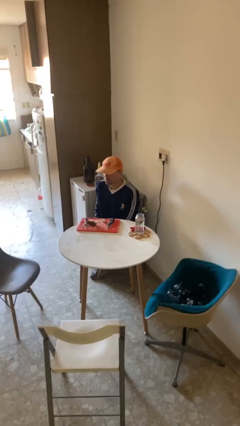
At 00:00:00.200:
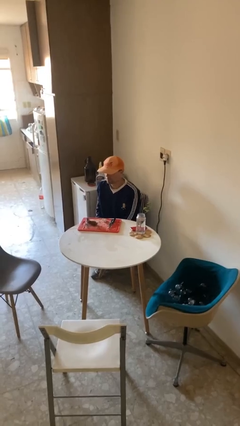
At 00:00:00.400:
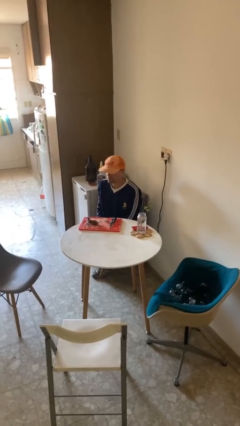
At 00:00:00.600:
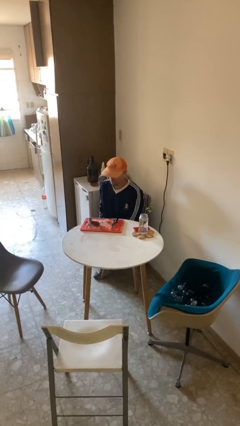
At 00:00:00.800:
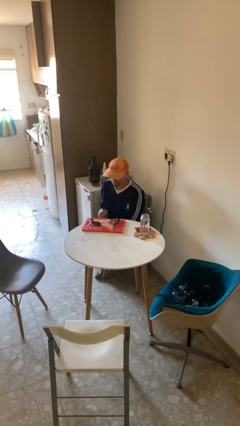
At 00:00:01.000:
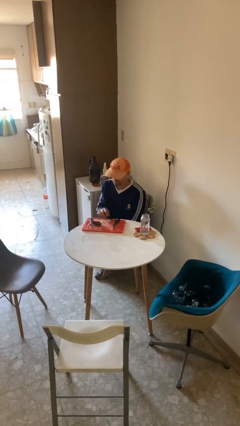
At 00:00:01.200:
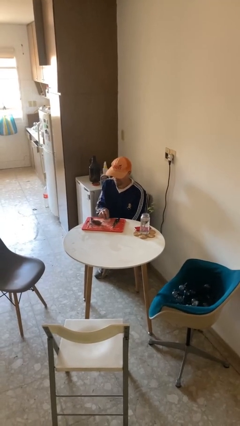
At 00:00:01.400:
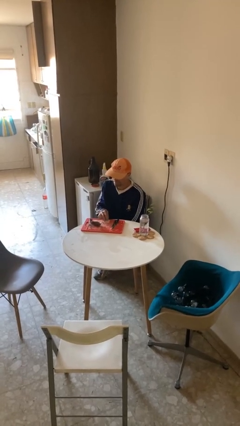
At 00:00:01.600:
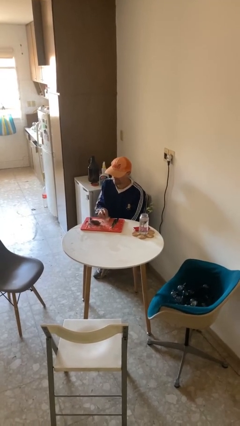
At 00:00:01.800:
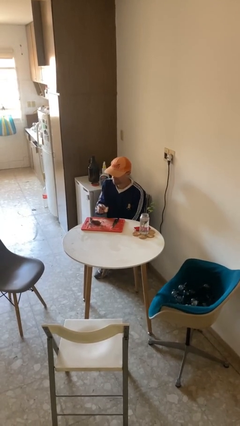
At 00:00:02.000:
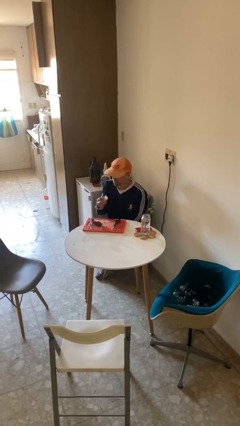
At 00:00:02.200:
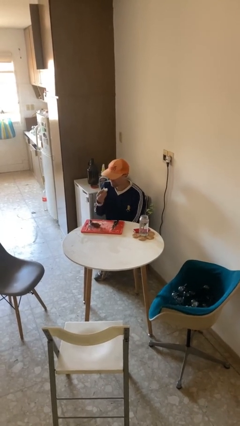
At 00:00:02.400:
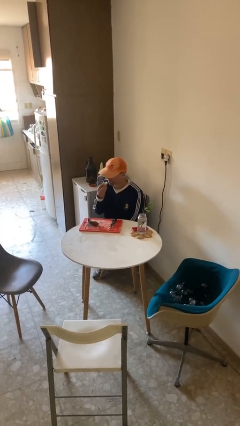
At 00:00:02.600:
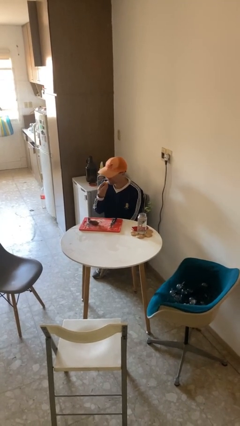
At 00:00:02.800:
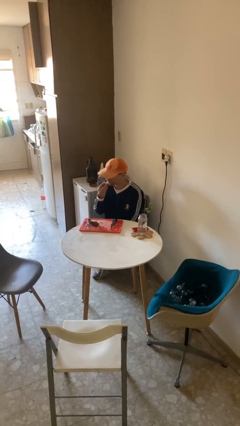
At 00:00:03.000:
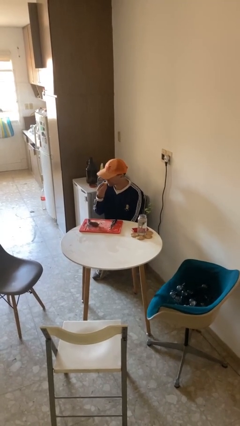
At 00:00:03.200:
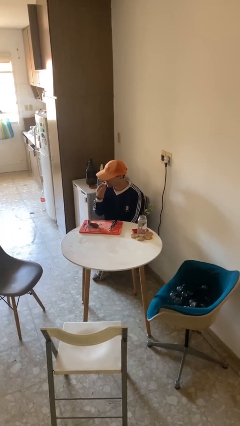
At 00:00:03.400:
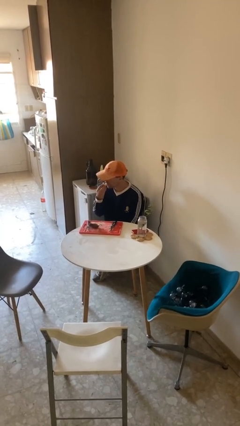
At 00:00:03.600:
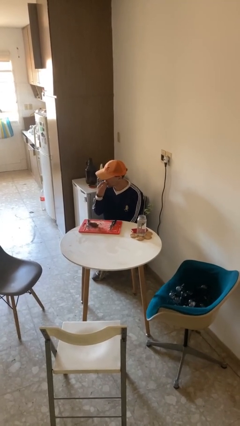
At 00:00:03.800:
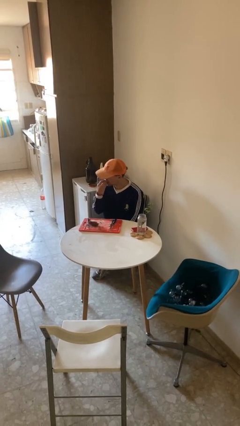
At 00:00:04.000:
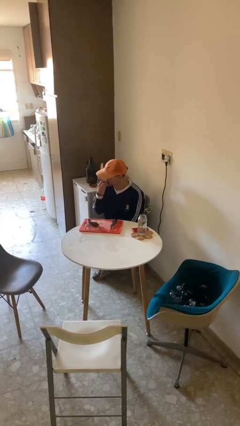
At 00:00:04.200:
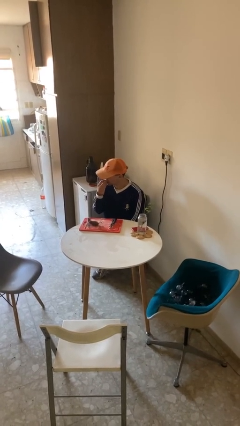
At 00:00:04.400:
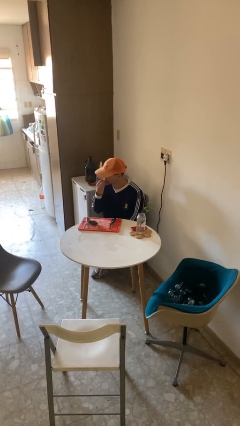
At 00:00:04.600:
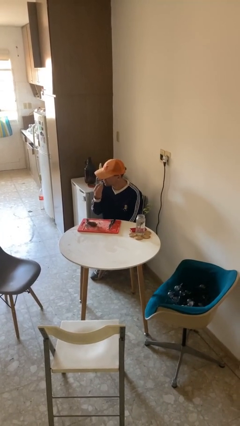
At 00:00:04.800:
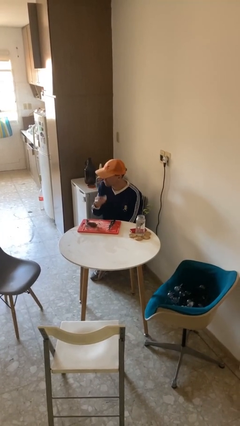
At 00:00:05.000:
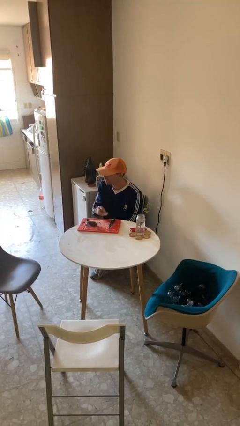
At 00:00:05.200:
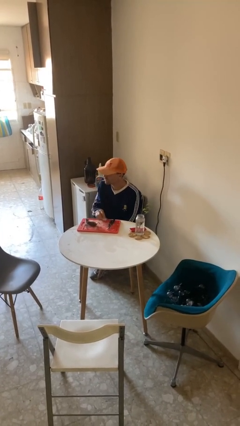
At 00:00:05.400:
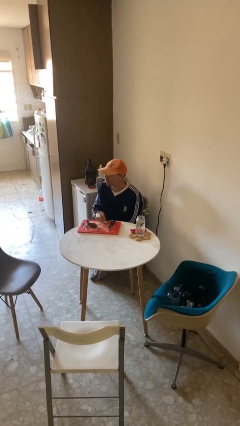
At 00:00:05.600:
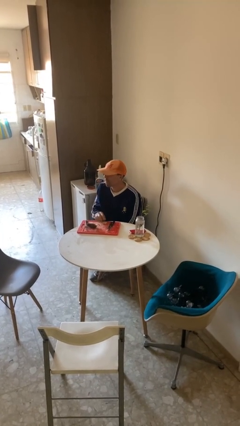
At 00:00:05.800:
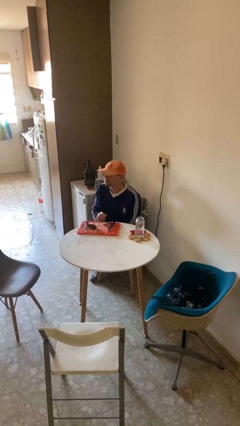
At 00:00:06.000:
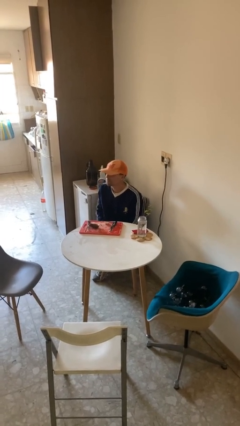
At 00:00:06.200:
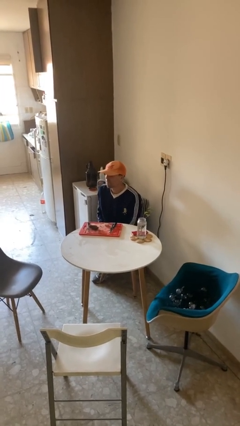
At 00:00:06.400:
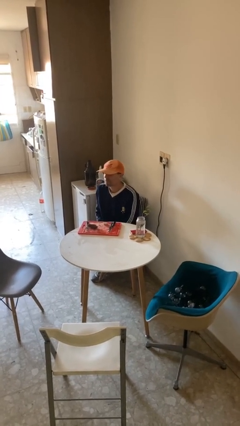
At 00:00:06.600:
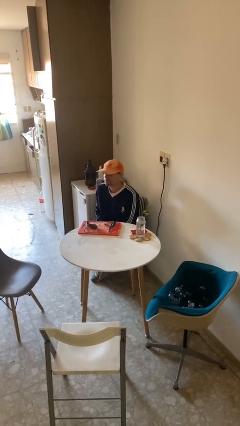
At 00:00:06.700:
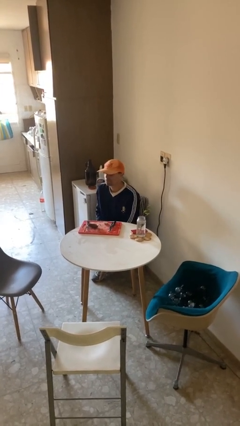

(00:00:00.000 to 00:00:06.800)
person eats with hands

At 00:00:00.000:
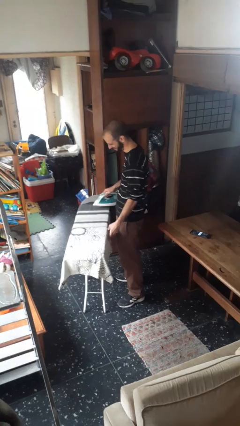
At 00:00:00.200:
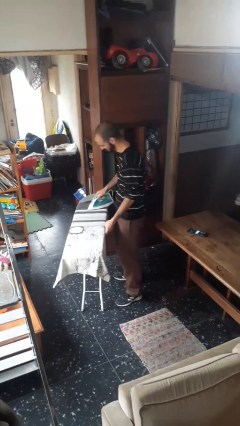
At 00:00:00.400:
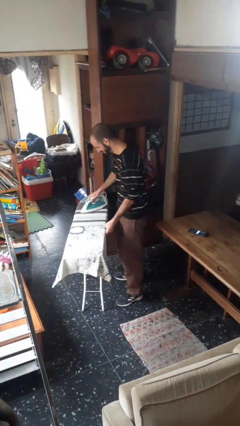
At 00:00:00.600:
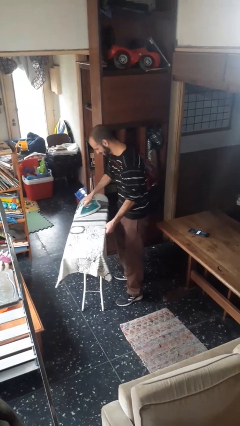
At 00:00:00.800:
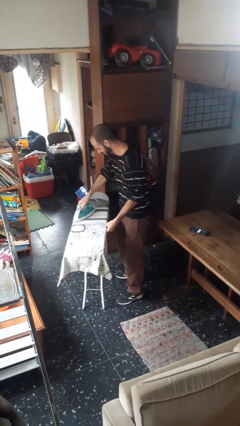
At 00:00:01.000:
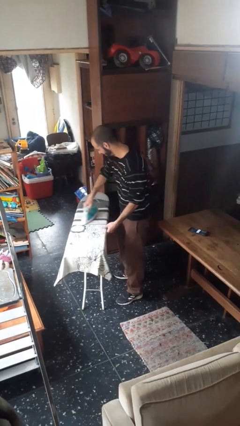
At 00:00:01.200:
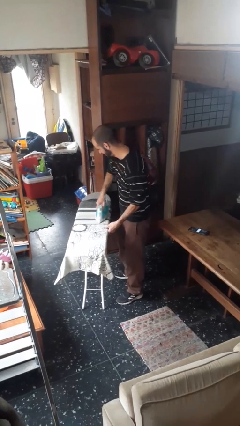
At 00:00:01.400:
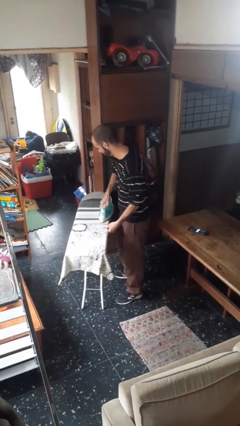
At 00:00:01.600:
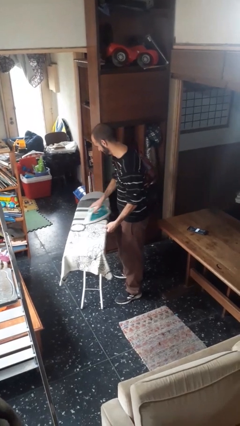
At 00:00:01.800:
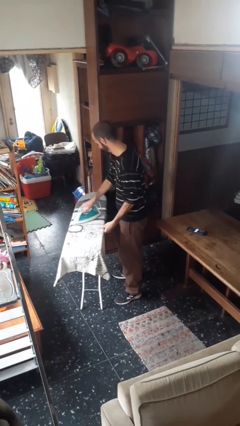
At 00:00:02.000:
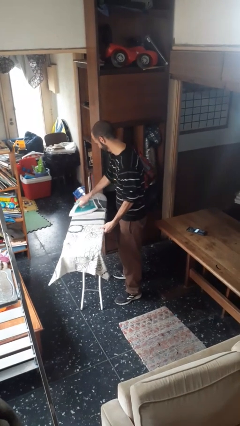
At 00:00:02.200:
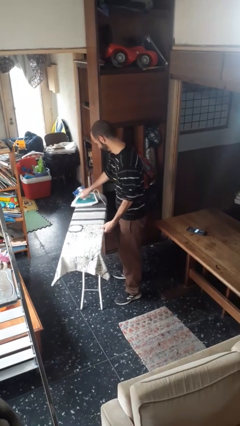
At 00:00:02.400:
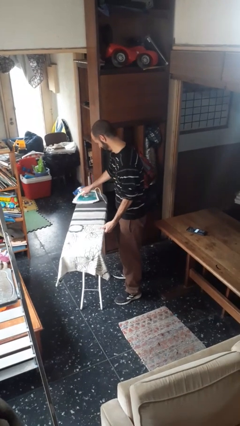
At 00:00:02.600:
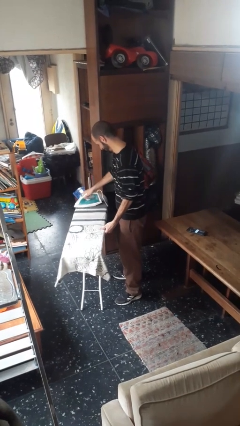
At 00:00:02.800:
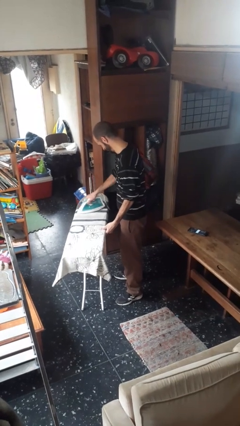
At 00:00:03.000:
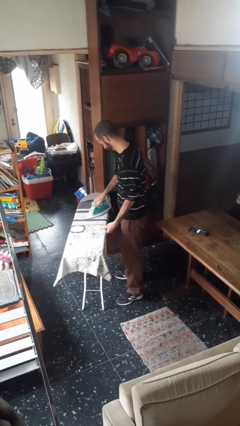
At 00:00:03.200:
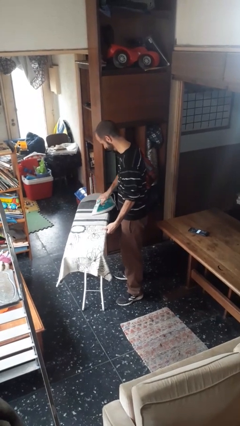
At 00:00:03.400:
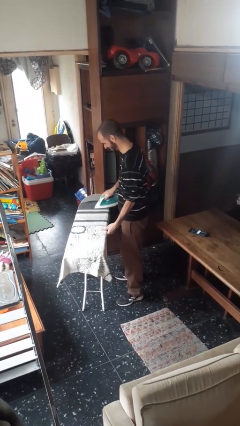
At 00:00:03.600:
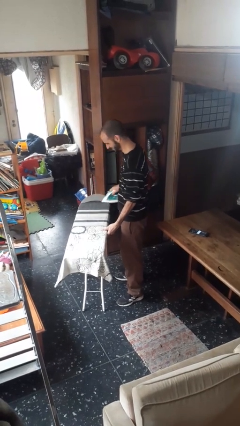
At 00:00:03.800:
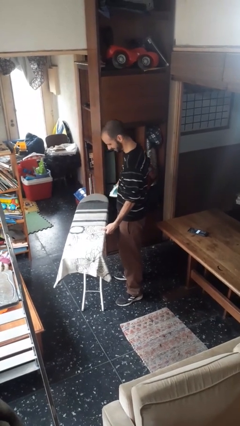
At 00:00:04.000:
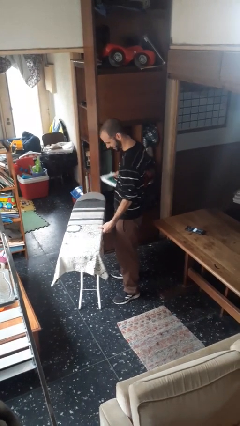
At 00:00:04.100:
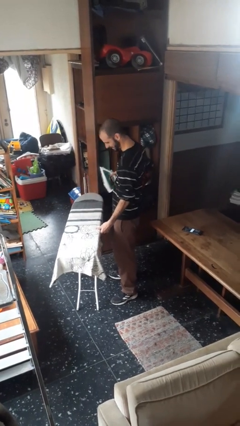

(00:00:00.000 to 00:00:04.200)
person irons clothes

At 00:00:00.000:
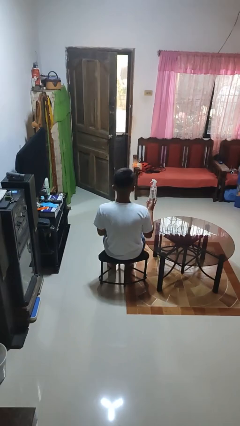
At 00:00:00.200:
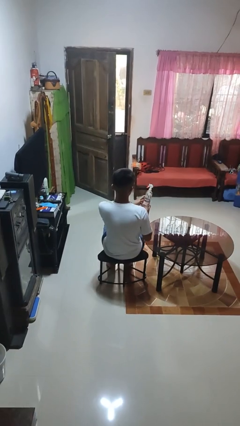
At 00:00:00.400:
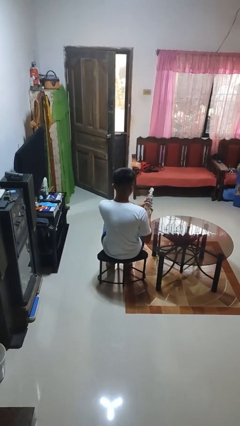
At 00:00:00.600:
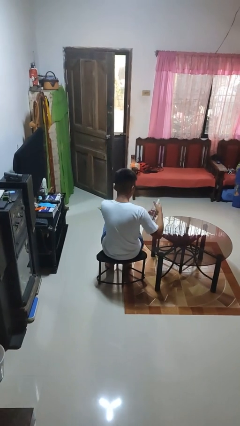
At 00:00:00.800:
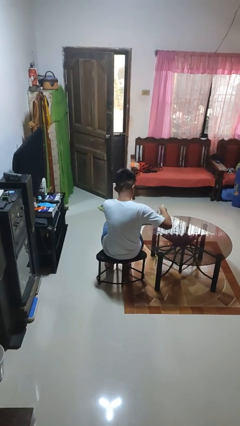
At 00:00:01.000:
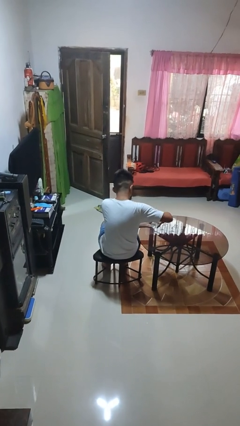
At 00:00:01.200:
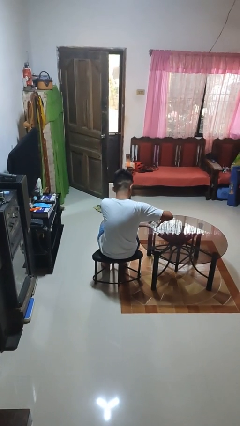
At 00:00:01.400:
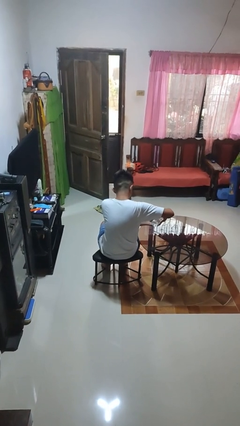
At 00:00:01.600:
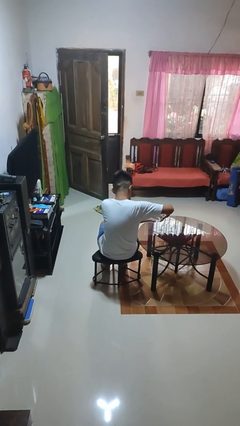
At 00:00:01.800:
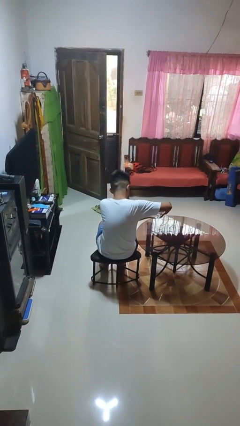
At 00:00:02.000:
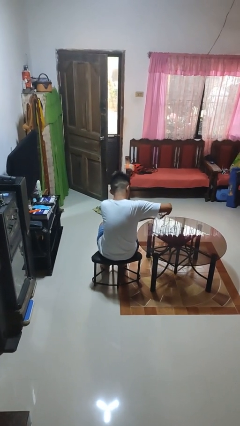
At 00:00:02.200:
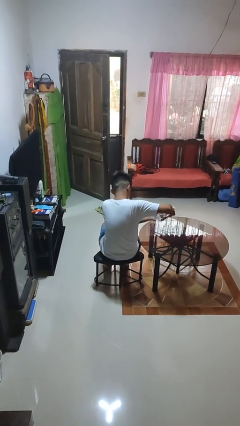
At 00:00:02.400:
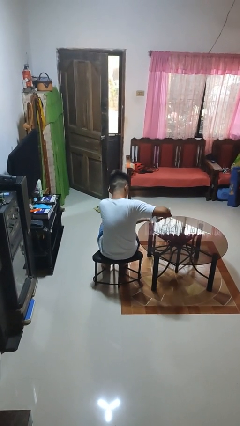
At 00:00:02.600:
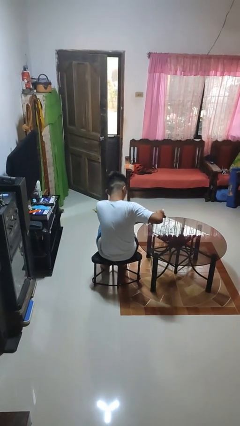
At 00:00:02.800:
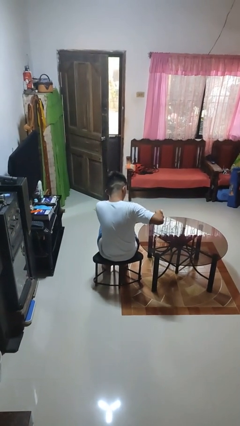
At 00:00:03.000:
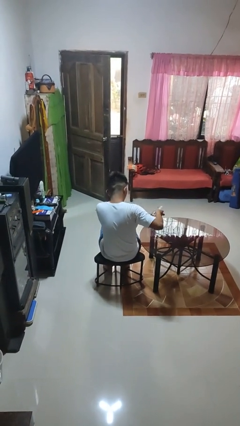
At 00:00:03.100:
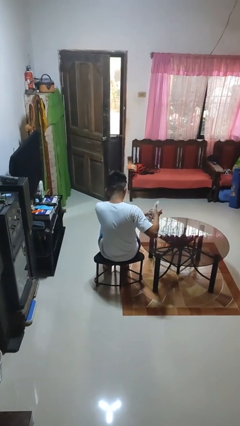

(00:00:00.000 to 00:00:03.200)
person sprays from bottle

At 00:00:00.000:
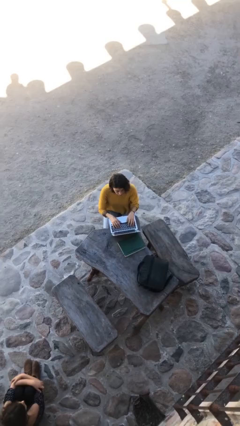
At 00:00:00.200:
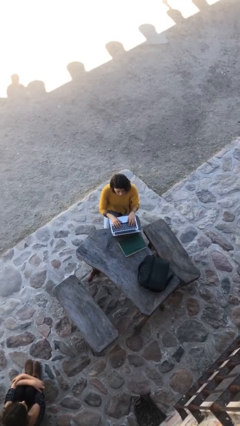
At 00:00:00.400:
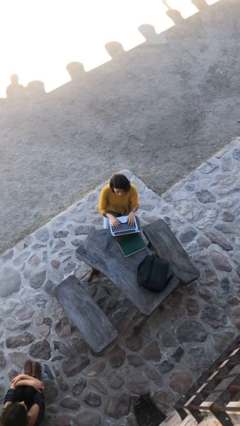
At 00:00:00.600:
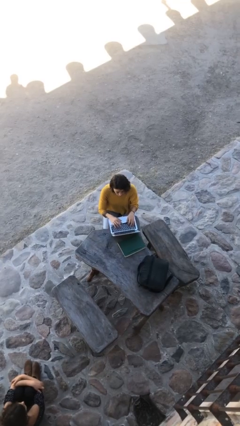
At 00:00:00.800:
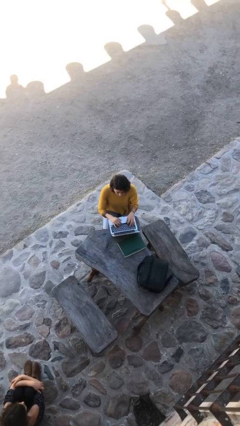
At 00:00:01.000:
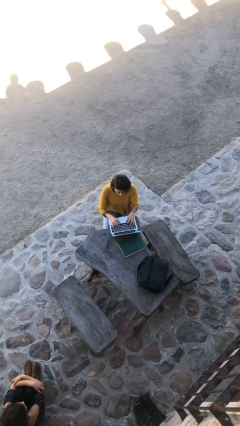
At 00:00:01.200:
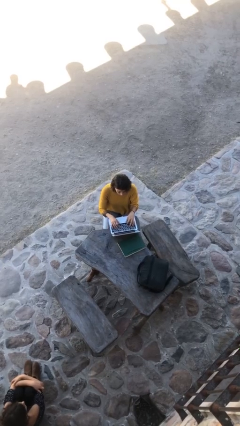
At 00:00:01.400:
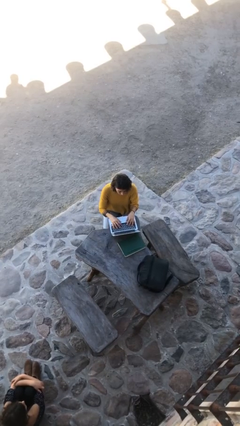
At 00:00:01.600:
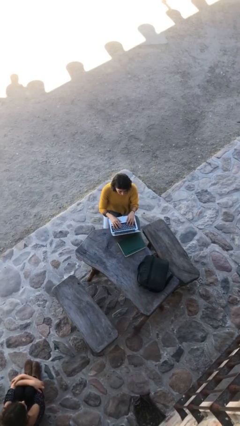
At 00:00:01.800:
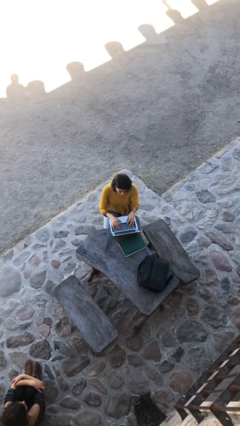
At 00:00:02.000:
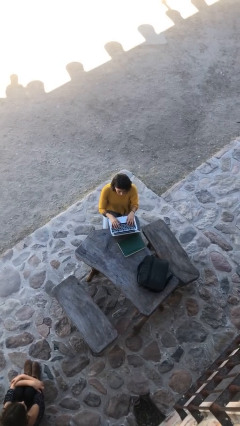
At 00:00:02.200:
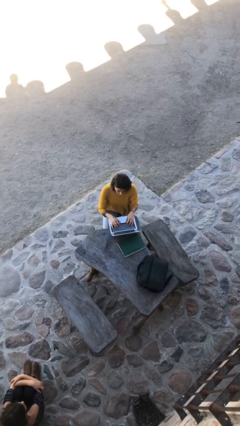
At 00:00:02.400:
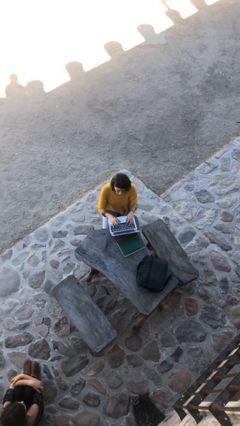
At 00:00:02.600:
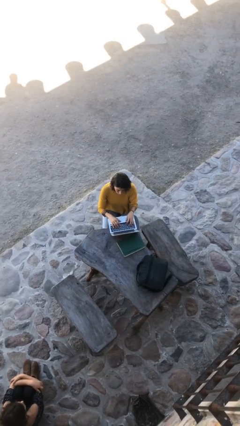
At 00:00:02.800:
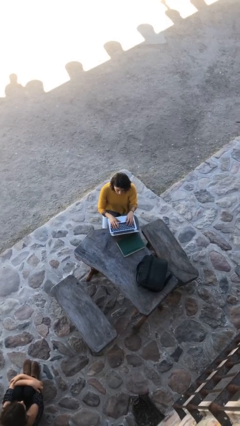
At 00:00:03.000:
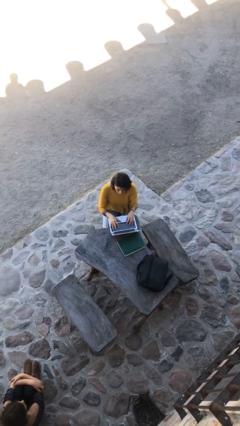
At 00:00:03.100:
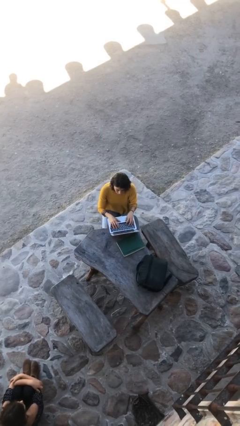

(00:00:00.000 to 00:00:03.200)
person interacts with laptop

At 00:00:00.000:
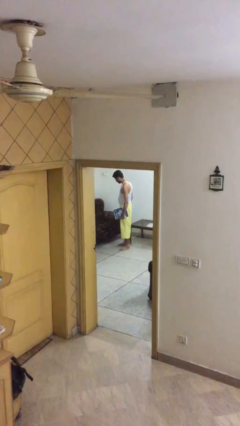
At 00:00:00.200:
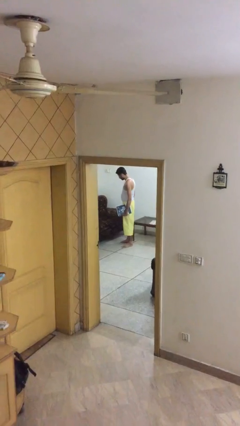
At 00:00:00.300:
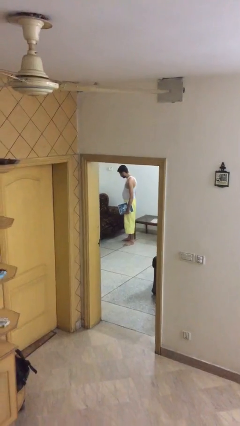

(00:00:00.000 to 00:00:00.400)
person sits down
